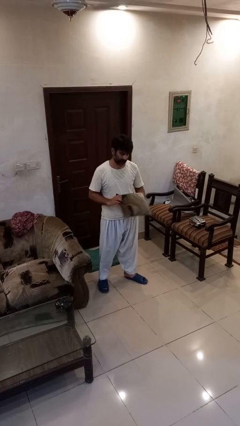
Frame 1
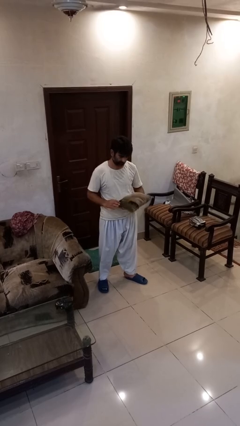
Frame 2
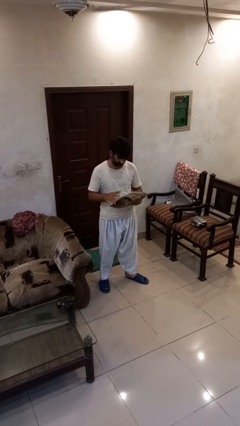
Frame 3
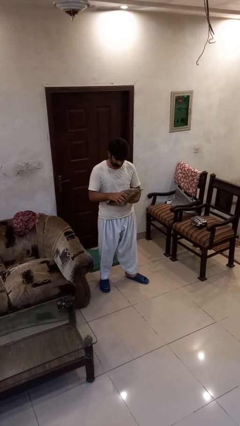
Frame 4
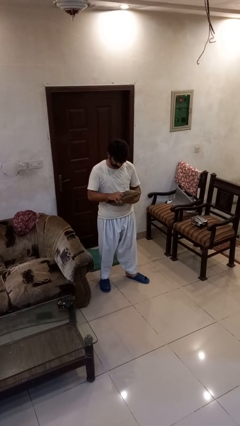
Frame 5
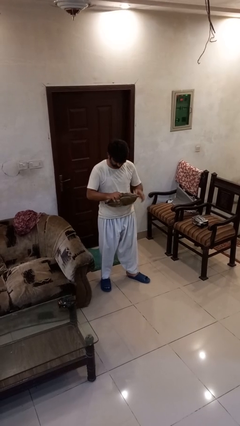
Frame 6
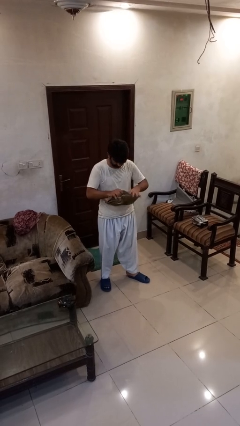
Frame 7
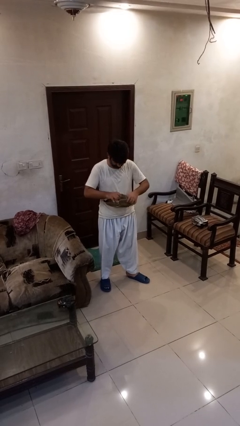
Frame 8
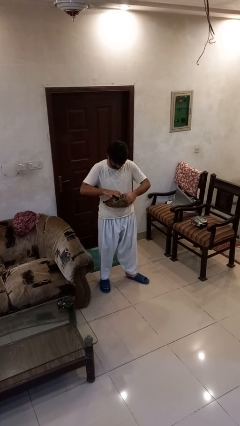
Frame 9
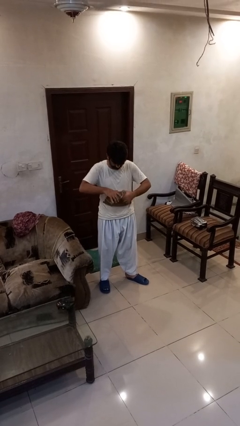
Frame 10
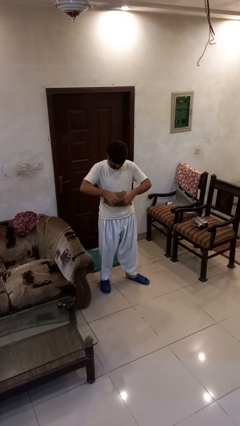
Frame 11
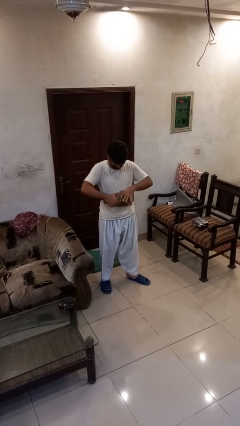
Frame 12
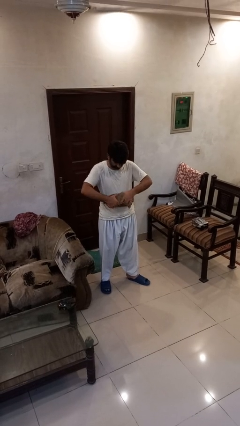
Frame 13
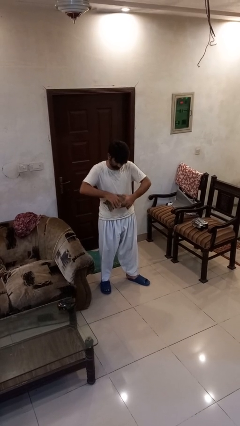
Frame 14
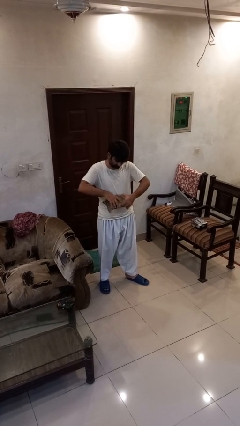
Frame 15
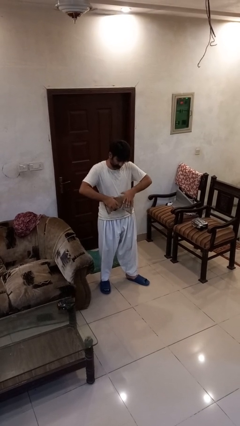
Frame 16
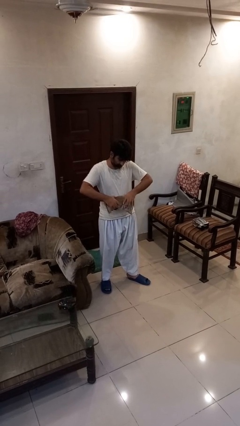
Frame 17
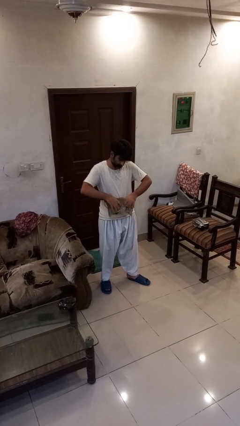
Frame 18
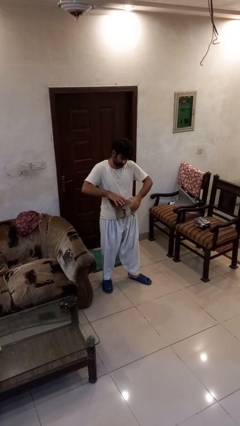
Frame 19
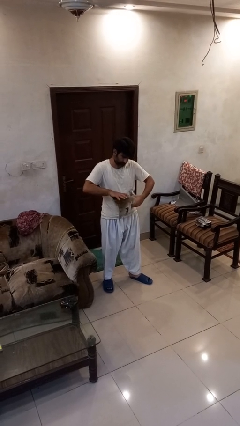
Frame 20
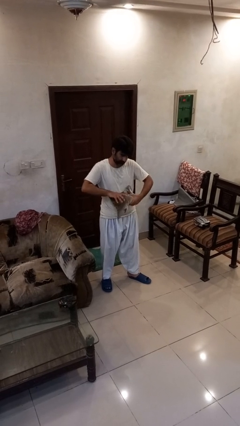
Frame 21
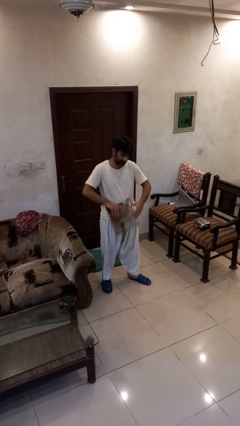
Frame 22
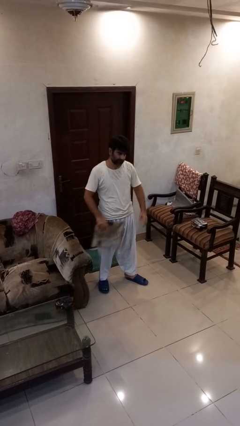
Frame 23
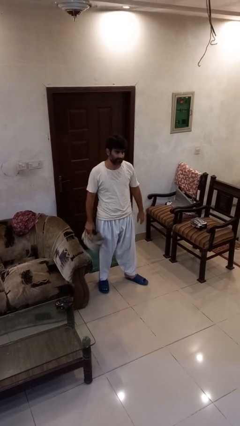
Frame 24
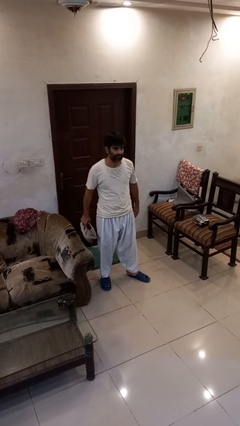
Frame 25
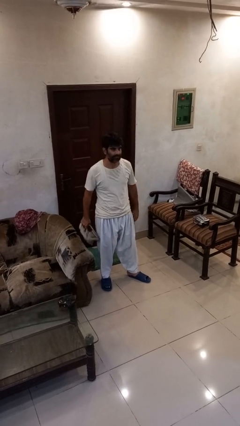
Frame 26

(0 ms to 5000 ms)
person squeezes object

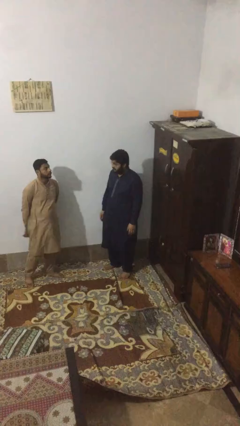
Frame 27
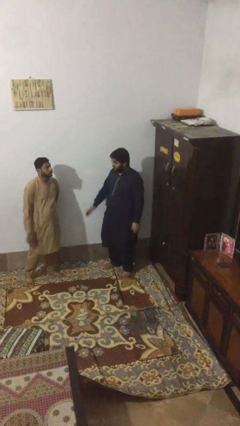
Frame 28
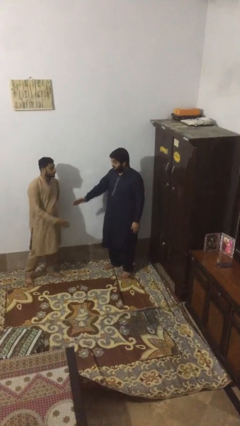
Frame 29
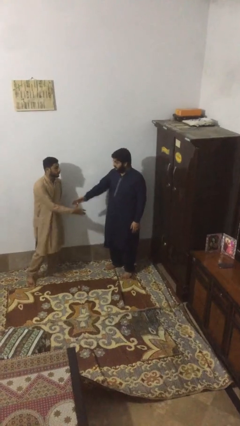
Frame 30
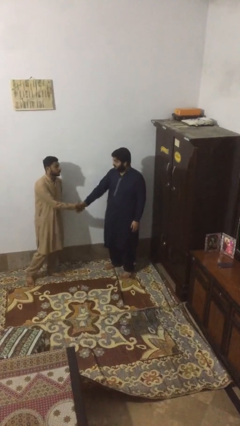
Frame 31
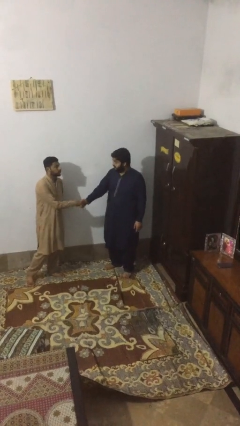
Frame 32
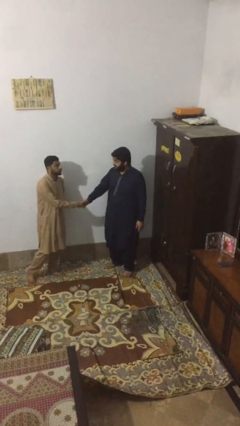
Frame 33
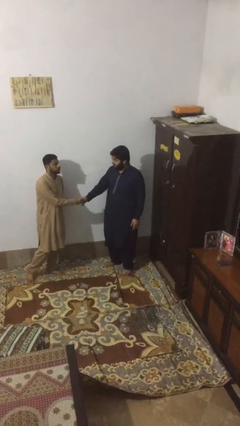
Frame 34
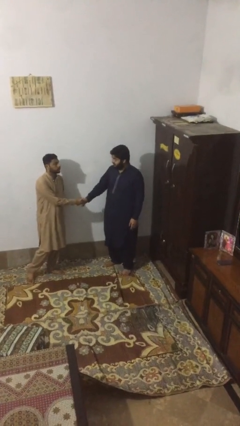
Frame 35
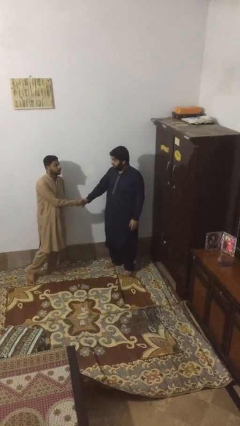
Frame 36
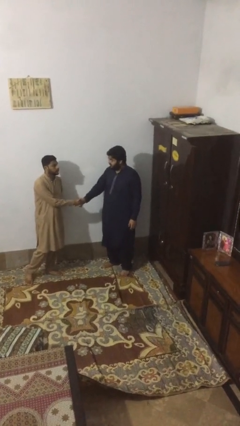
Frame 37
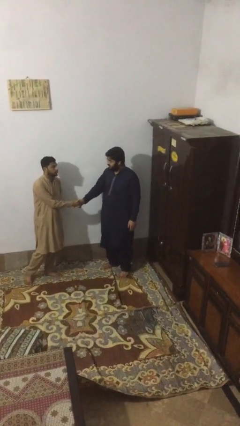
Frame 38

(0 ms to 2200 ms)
person shakes hand

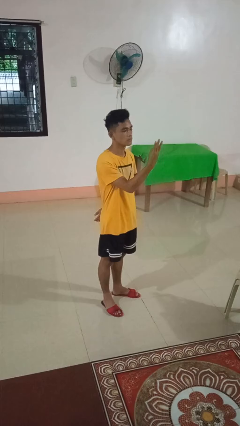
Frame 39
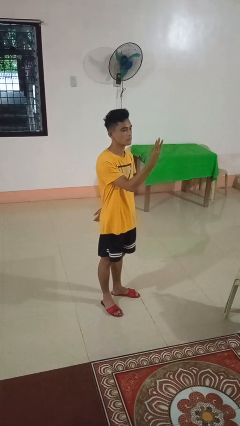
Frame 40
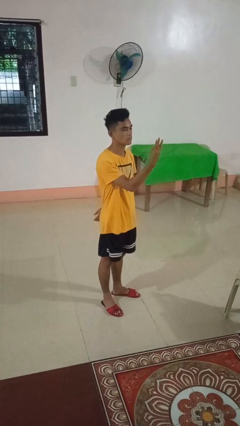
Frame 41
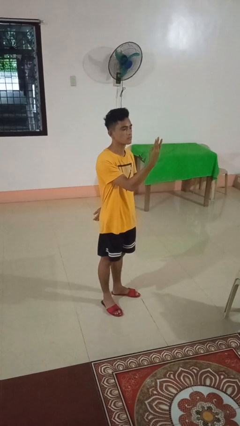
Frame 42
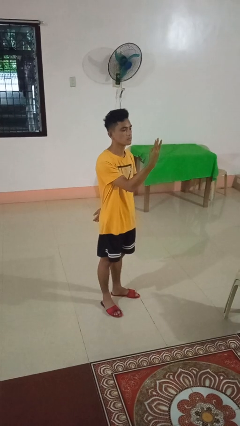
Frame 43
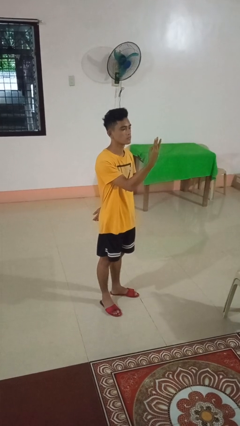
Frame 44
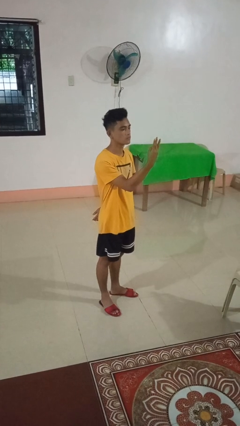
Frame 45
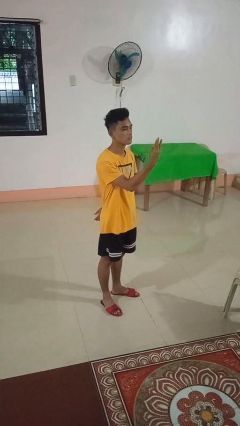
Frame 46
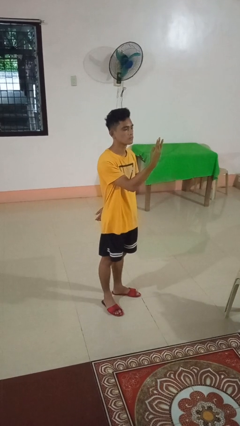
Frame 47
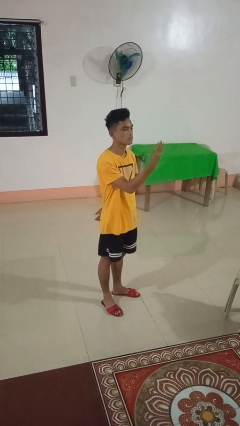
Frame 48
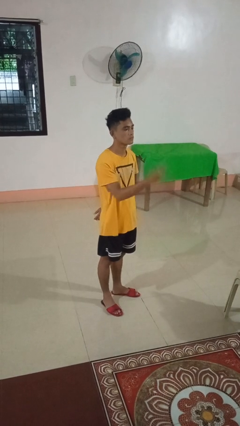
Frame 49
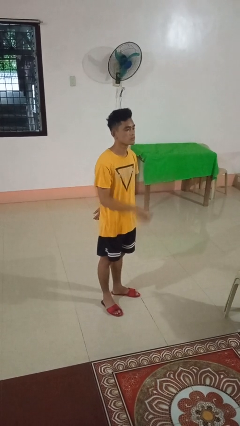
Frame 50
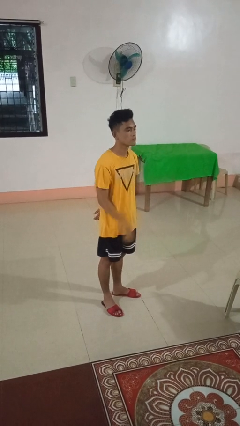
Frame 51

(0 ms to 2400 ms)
person gestures number three

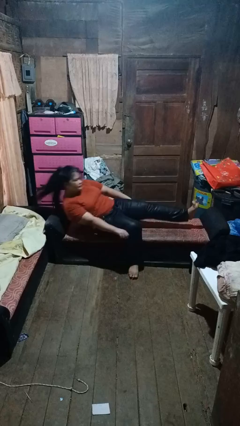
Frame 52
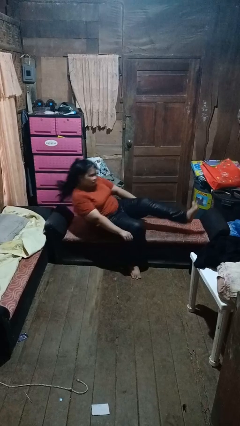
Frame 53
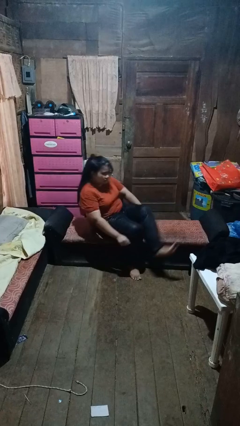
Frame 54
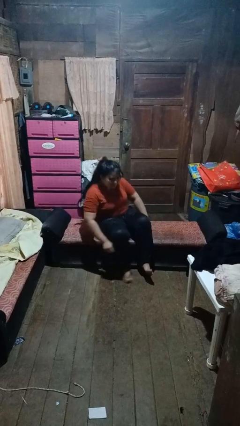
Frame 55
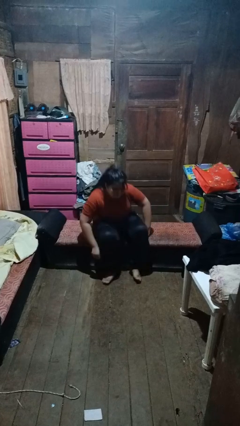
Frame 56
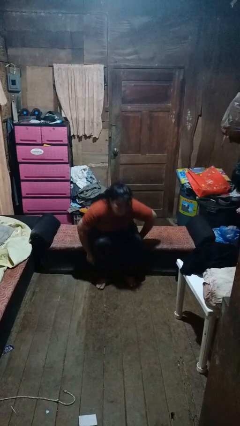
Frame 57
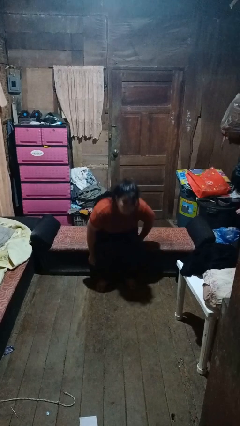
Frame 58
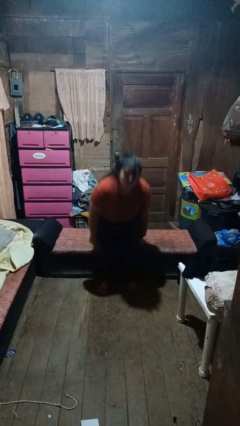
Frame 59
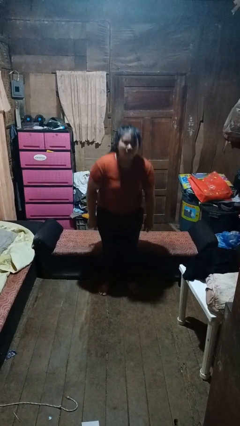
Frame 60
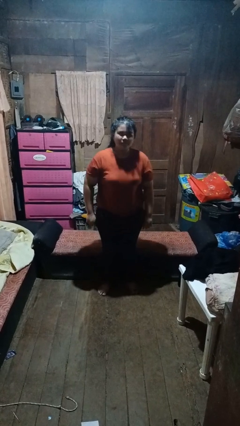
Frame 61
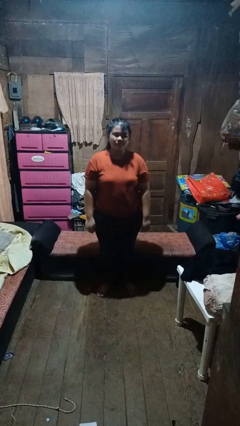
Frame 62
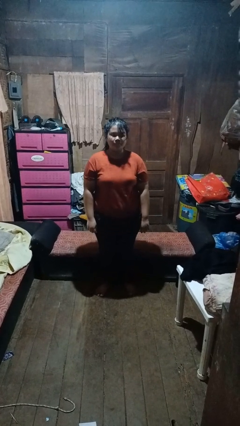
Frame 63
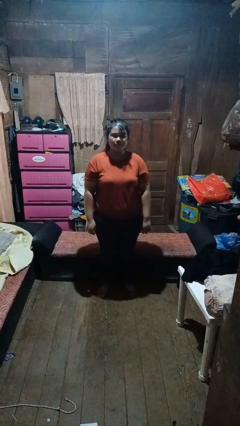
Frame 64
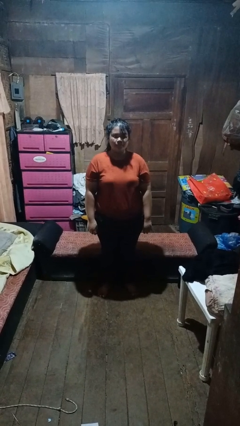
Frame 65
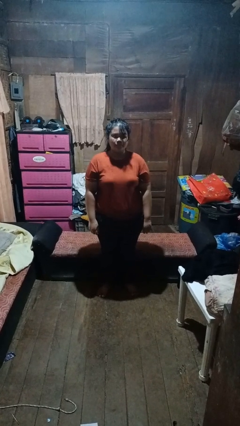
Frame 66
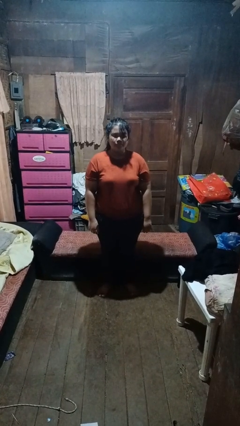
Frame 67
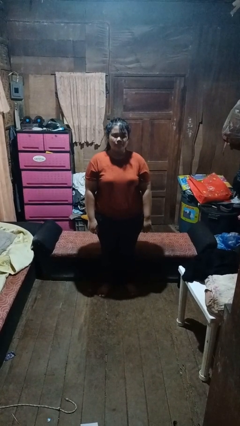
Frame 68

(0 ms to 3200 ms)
person stands up

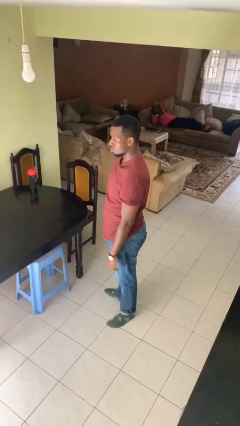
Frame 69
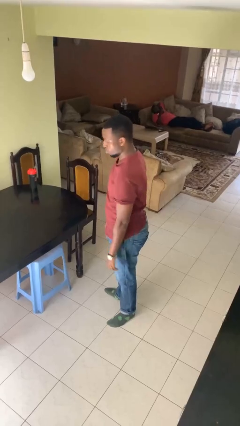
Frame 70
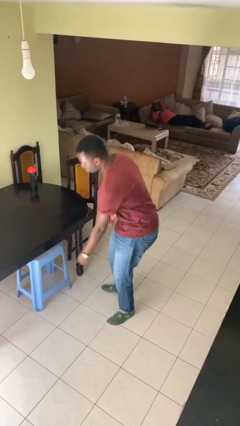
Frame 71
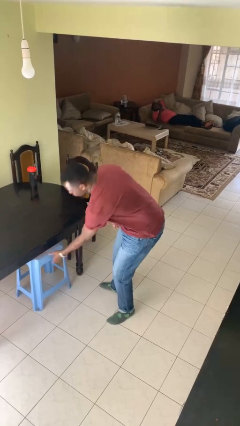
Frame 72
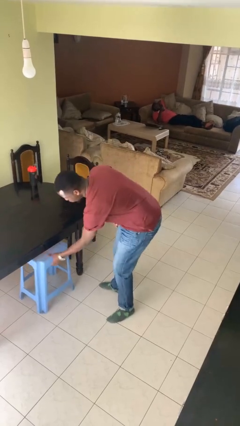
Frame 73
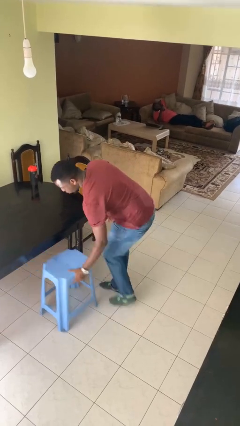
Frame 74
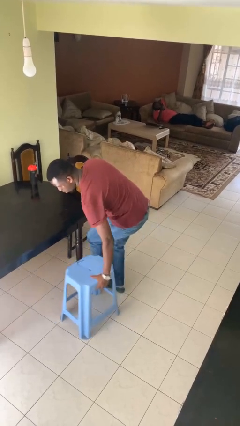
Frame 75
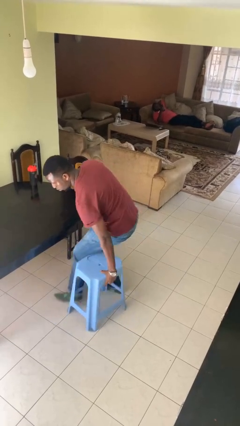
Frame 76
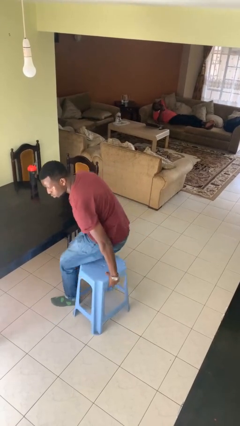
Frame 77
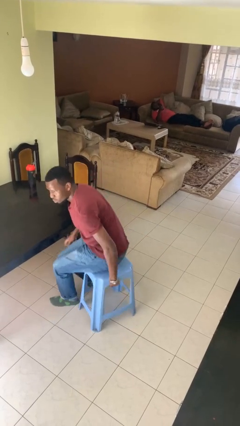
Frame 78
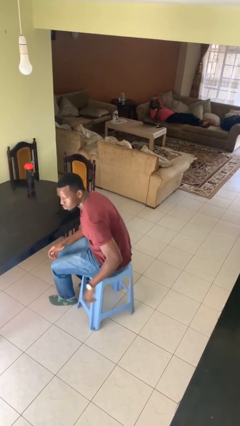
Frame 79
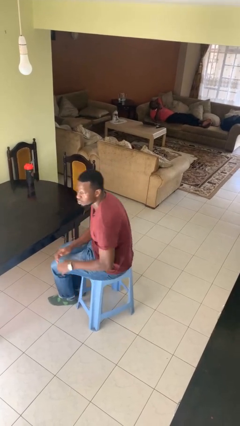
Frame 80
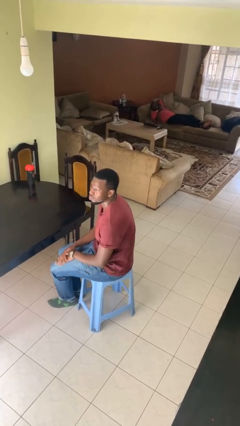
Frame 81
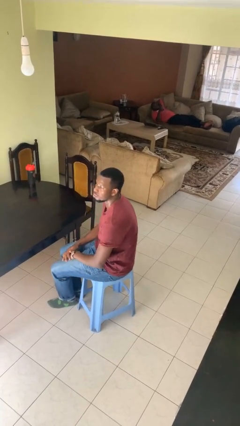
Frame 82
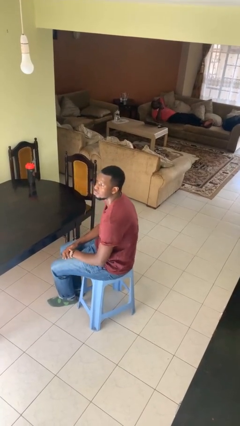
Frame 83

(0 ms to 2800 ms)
person sits down

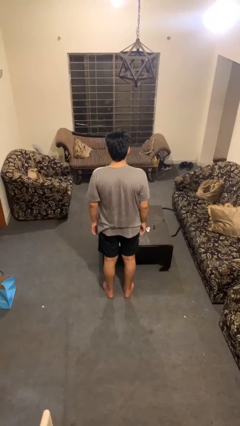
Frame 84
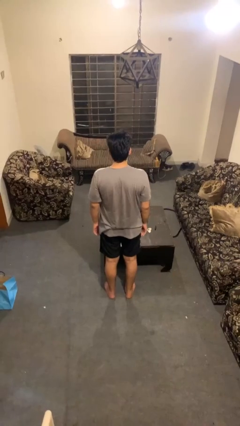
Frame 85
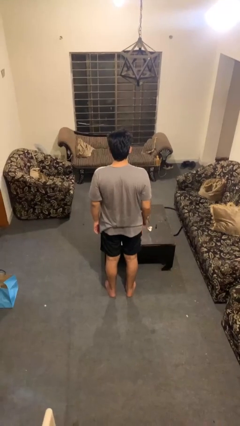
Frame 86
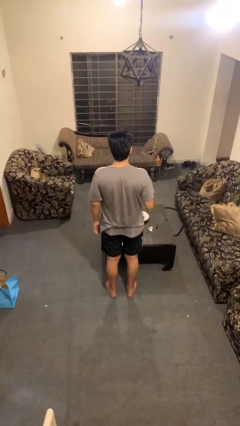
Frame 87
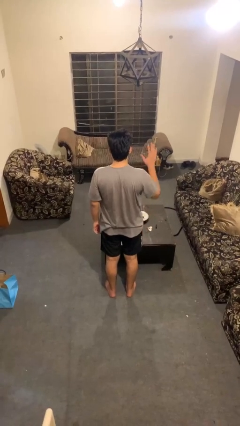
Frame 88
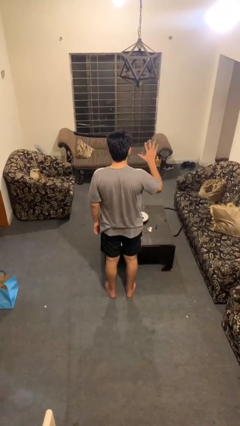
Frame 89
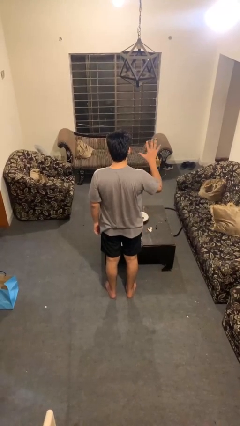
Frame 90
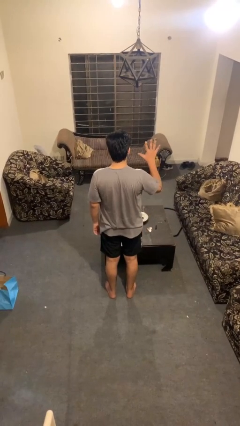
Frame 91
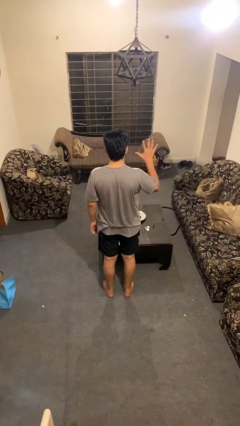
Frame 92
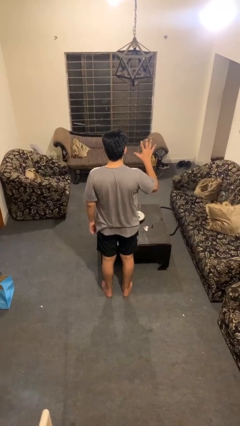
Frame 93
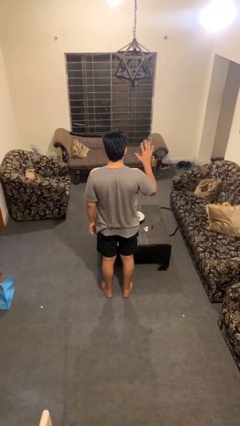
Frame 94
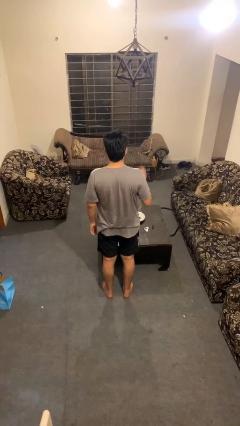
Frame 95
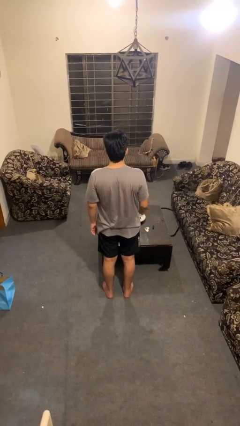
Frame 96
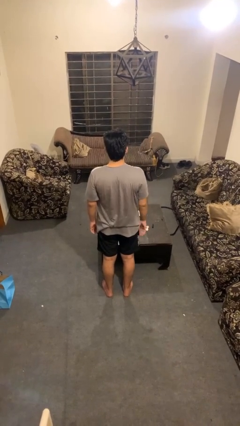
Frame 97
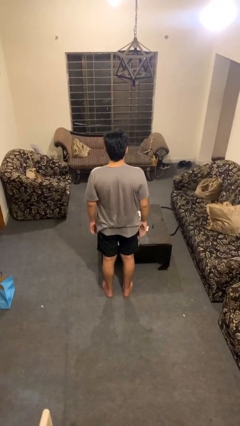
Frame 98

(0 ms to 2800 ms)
person gestures number five
